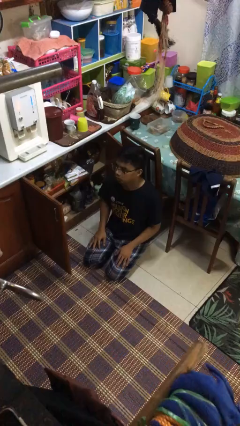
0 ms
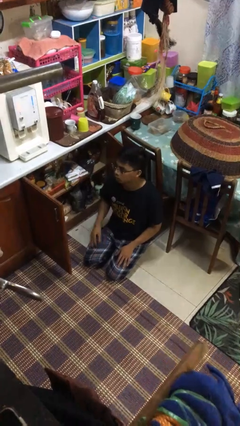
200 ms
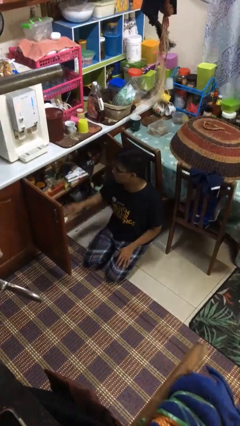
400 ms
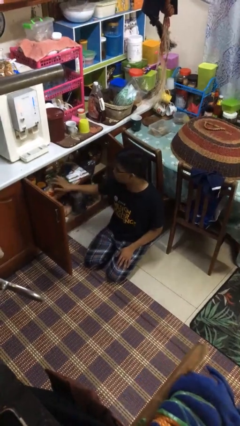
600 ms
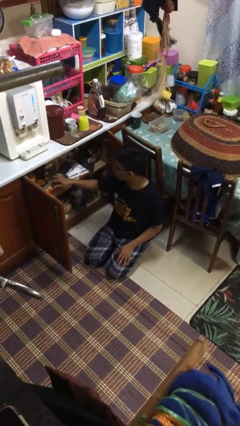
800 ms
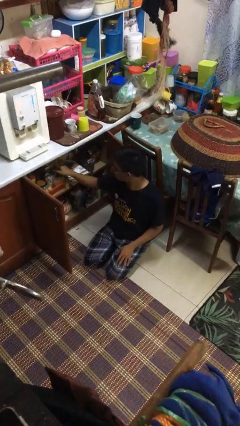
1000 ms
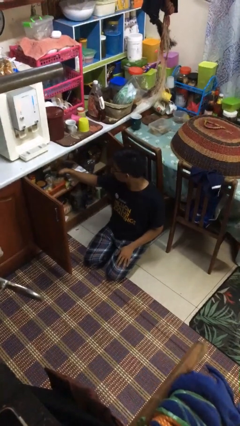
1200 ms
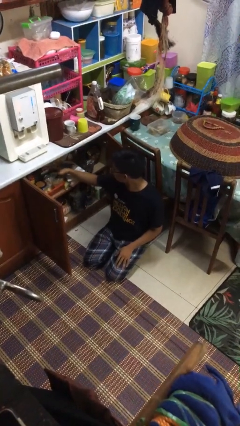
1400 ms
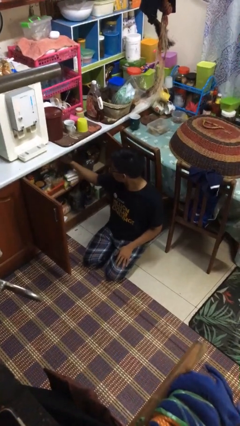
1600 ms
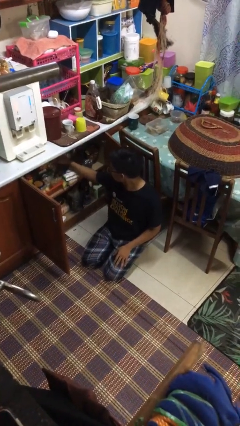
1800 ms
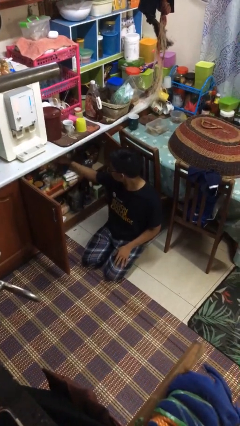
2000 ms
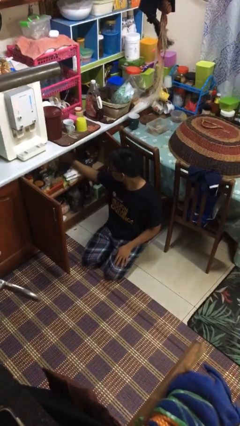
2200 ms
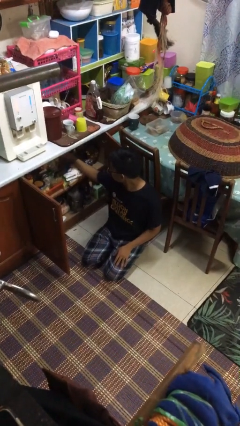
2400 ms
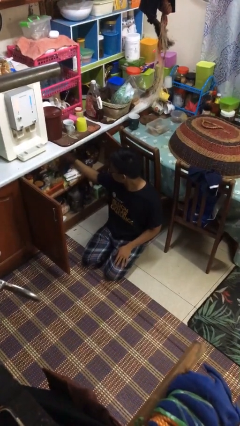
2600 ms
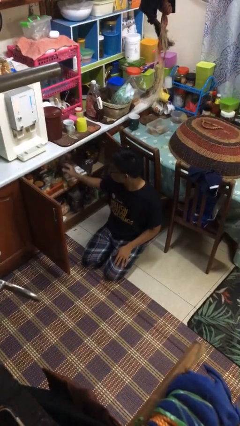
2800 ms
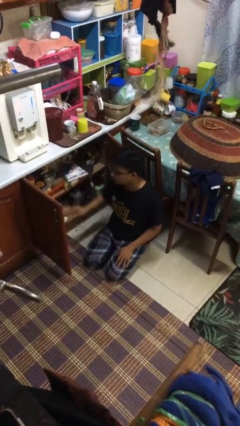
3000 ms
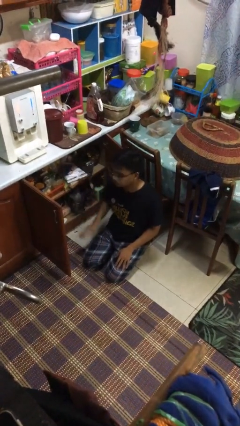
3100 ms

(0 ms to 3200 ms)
person searches in kitchen drawer

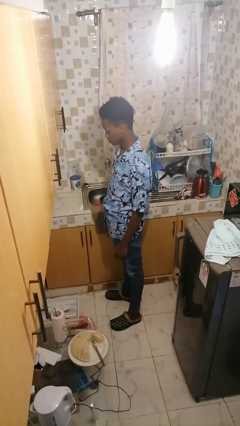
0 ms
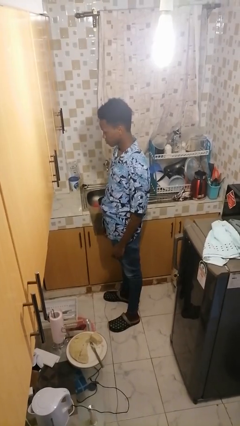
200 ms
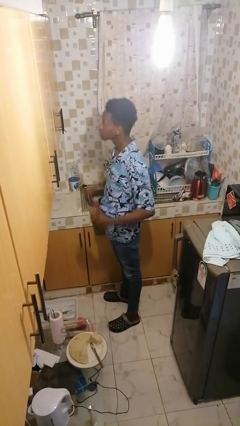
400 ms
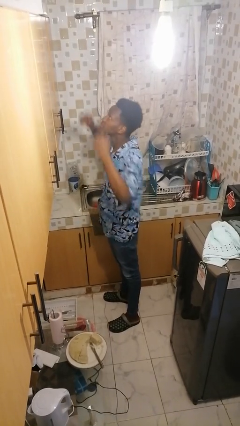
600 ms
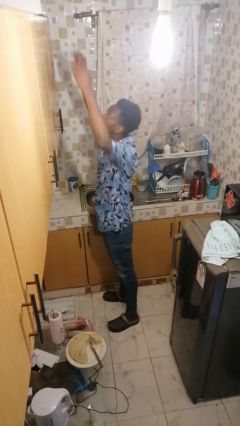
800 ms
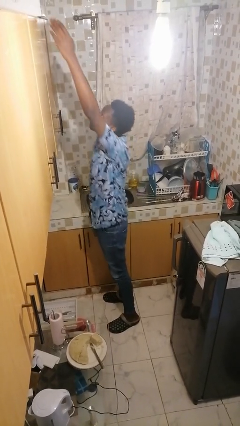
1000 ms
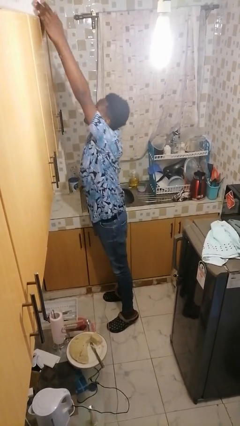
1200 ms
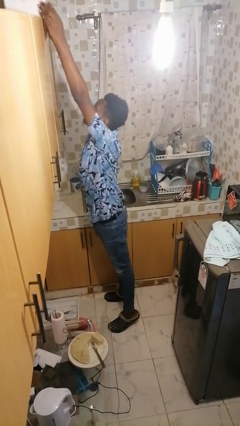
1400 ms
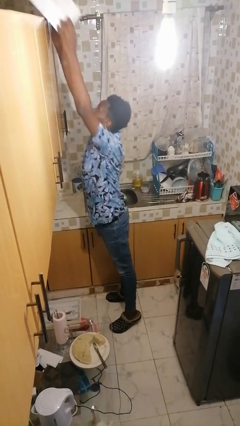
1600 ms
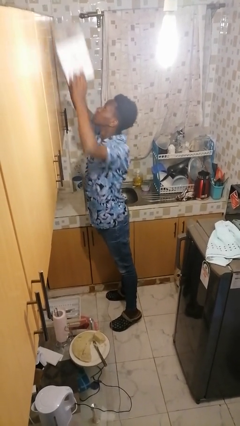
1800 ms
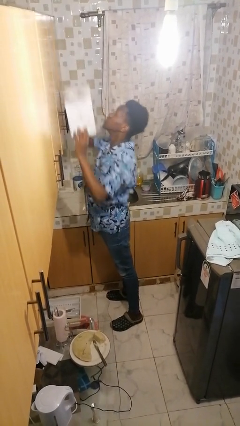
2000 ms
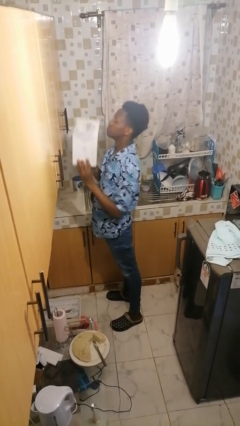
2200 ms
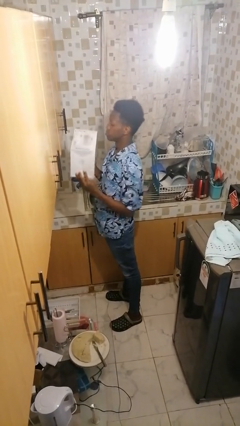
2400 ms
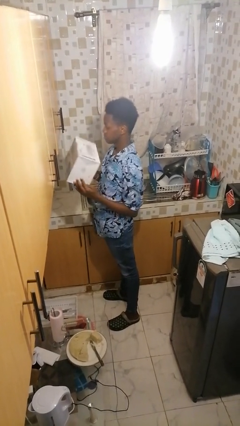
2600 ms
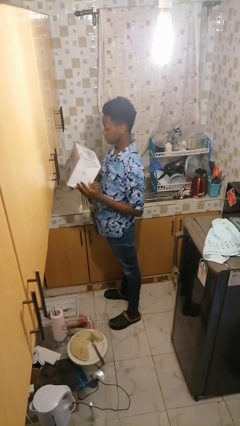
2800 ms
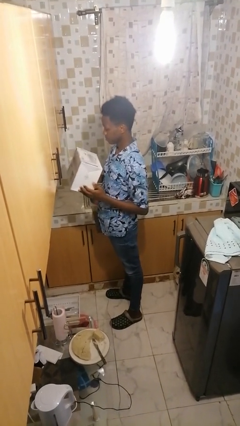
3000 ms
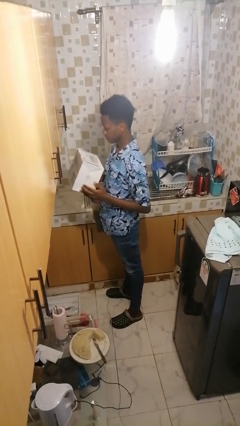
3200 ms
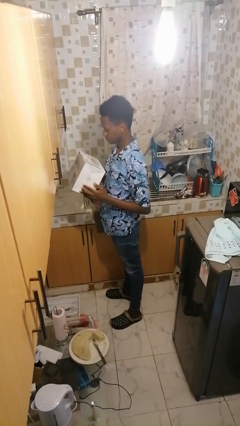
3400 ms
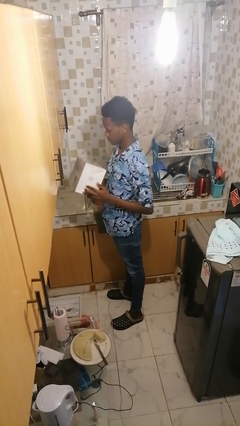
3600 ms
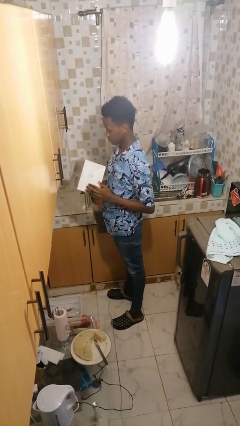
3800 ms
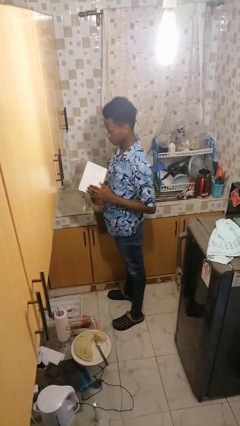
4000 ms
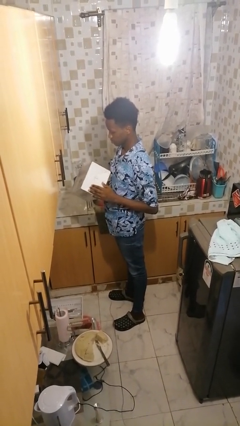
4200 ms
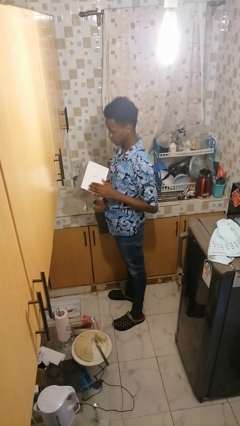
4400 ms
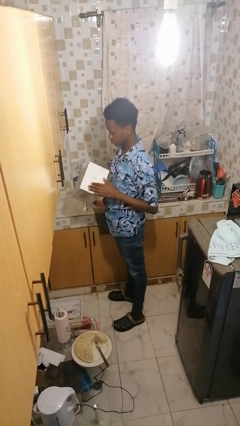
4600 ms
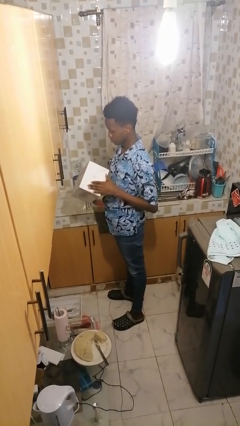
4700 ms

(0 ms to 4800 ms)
person picks up object from shelf

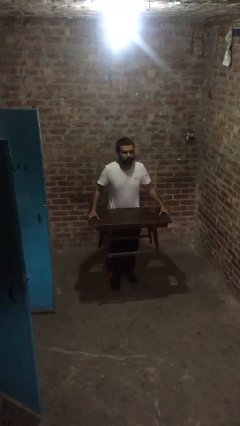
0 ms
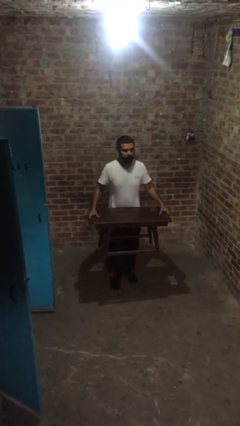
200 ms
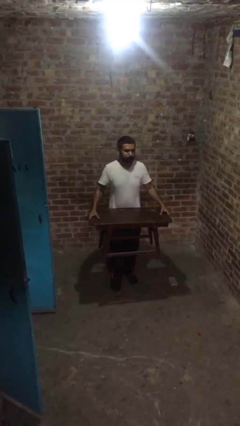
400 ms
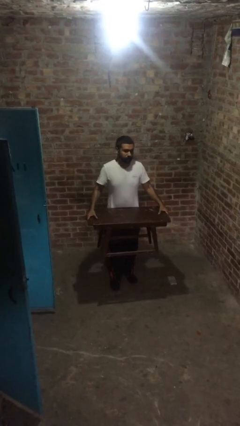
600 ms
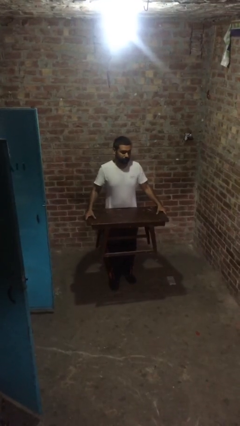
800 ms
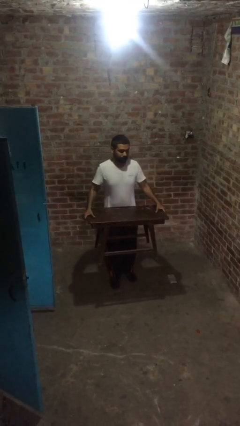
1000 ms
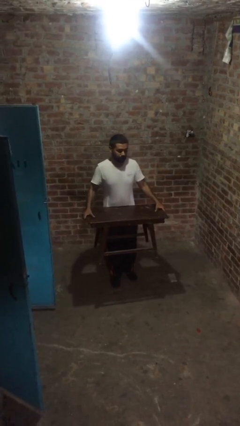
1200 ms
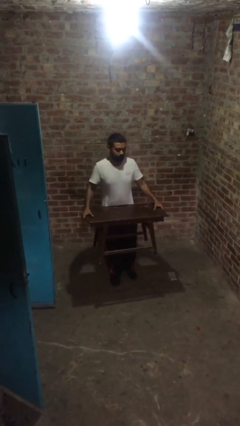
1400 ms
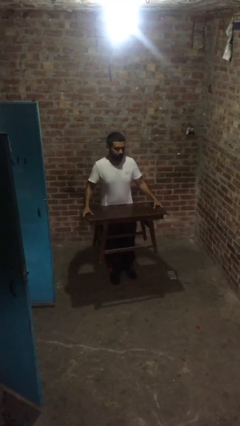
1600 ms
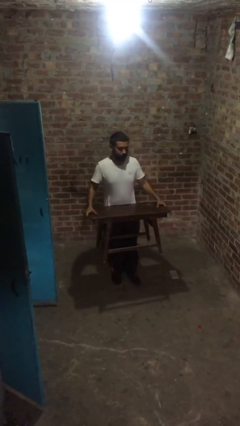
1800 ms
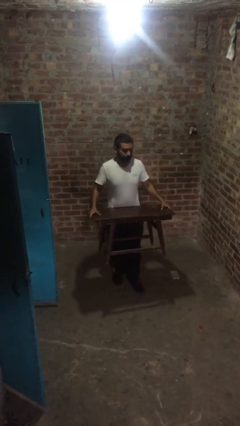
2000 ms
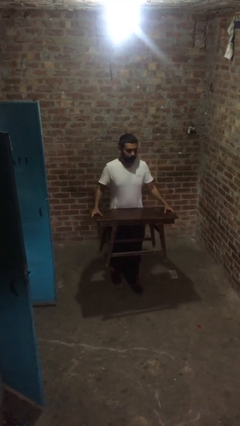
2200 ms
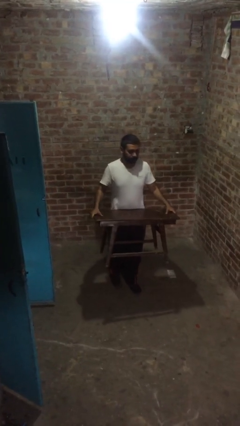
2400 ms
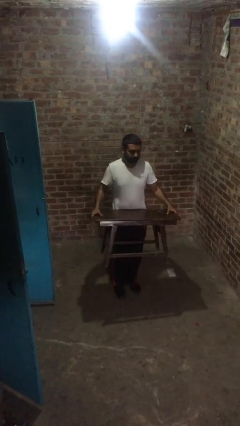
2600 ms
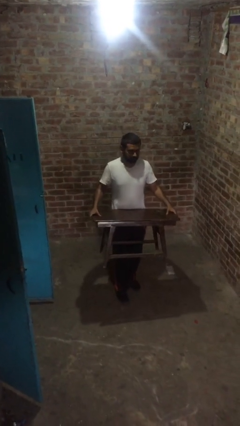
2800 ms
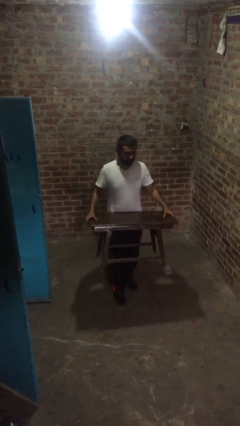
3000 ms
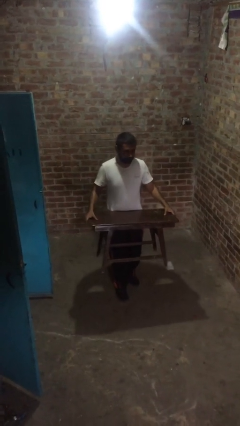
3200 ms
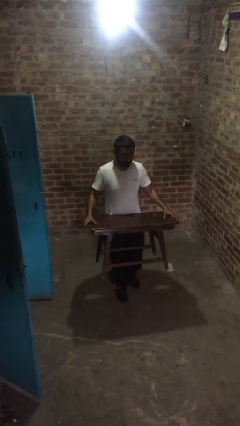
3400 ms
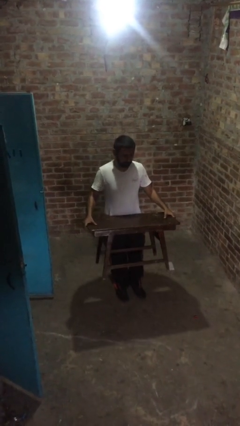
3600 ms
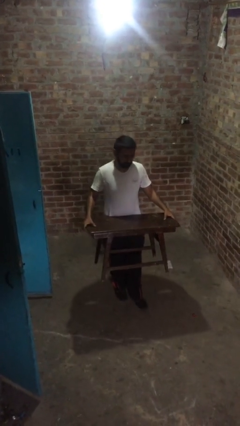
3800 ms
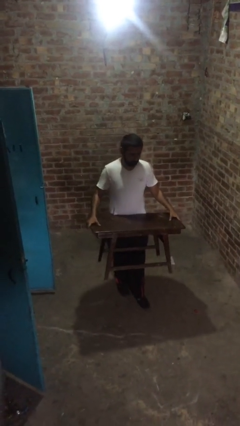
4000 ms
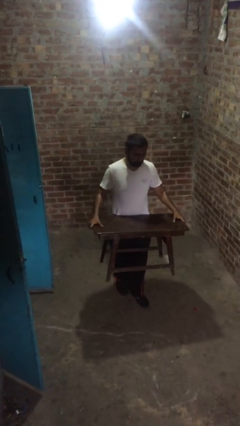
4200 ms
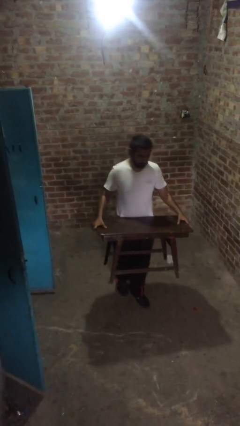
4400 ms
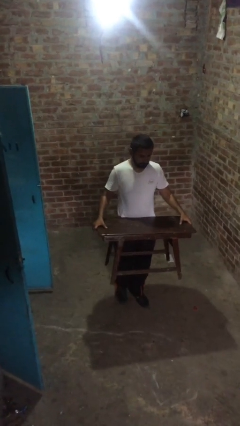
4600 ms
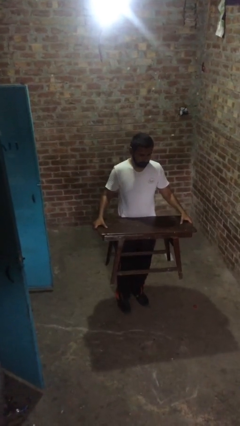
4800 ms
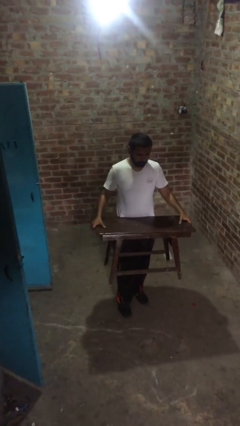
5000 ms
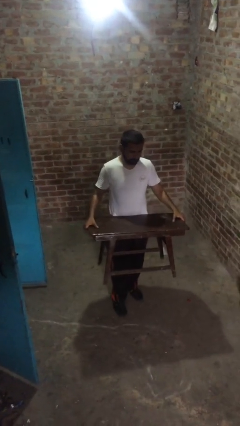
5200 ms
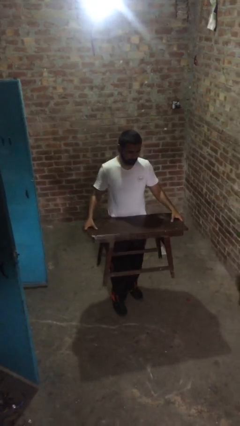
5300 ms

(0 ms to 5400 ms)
person carries heavy object

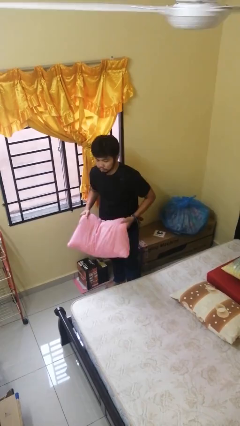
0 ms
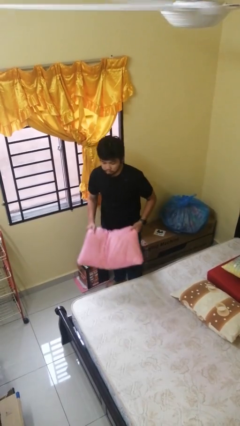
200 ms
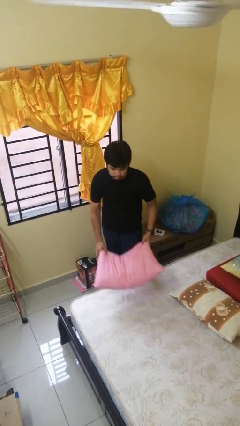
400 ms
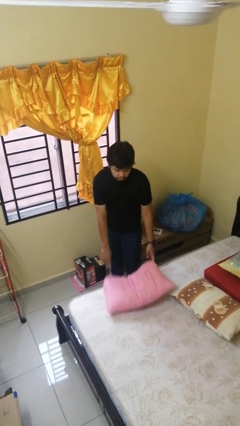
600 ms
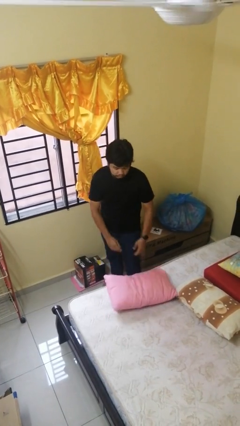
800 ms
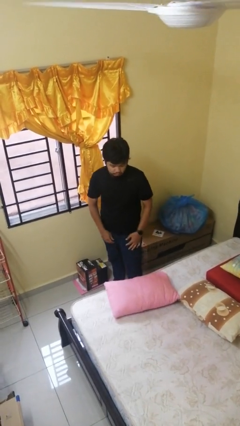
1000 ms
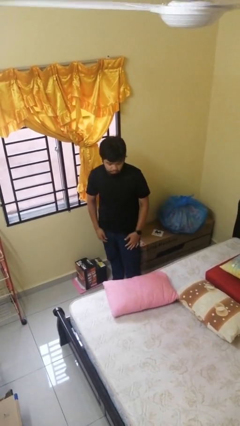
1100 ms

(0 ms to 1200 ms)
person puts down object on bed

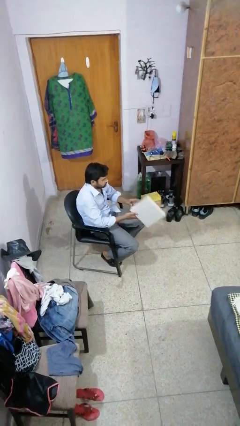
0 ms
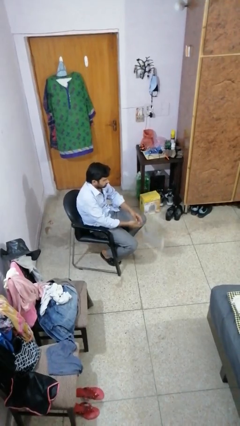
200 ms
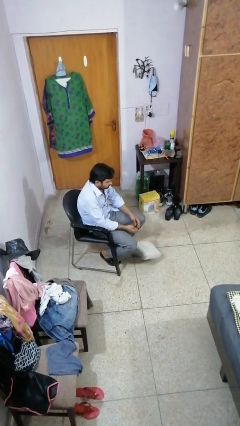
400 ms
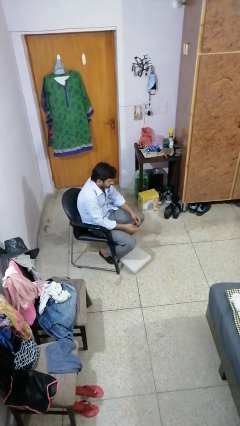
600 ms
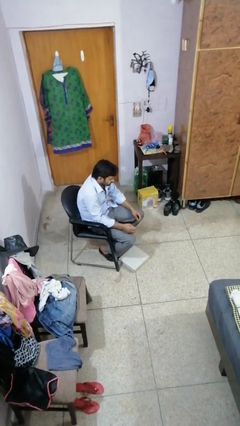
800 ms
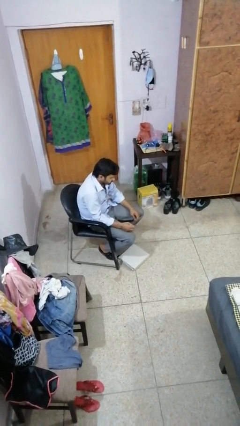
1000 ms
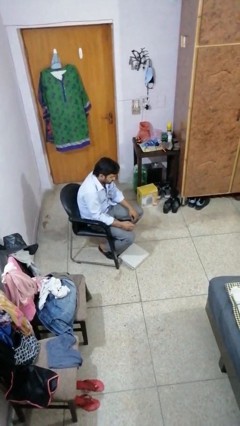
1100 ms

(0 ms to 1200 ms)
person drops object

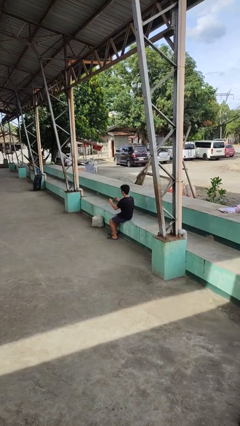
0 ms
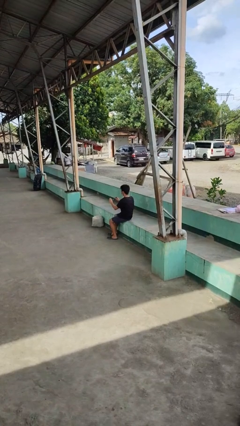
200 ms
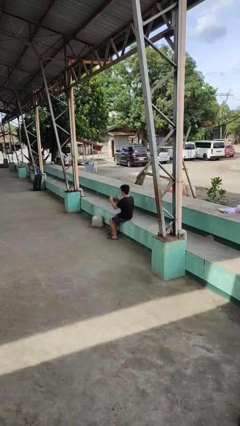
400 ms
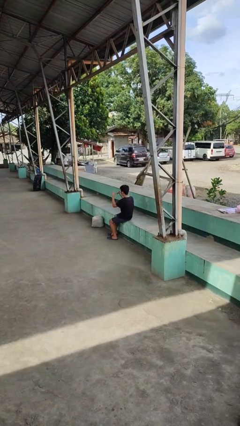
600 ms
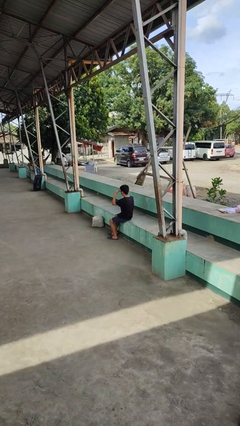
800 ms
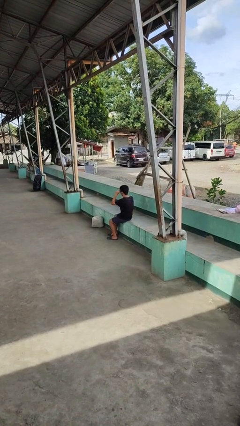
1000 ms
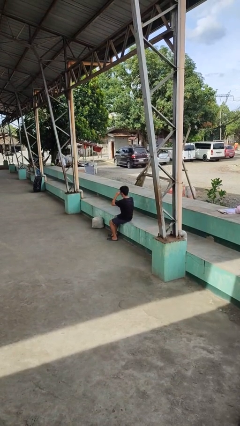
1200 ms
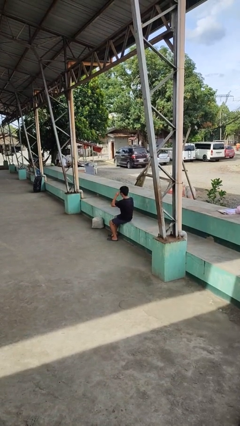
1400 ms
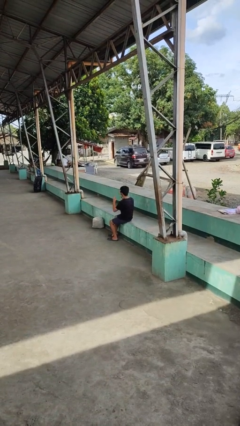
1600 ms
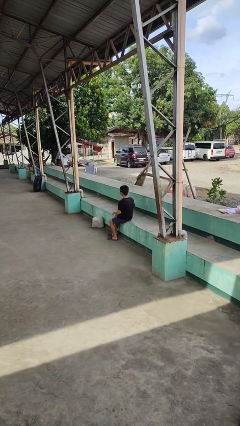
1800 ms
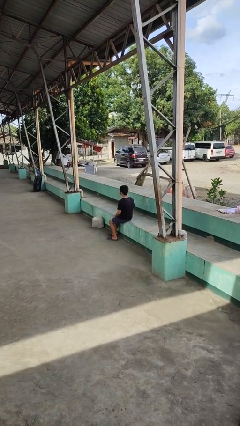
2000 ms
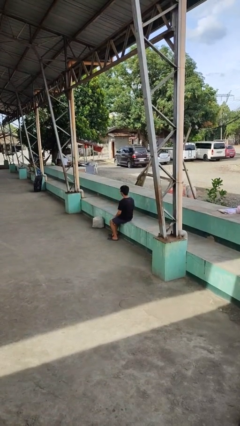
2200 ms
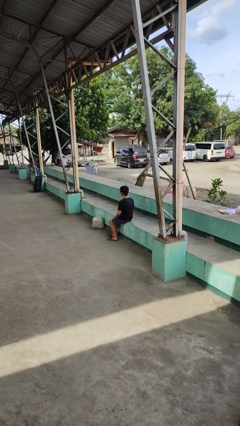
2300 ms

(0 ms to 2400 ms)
person puts on sunglasses
